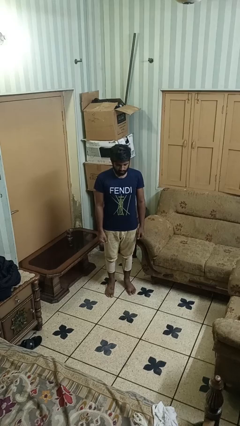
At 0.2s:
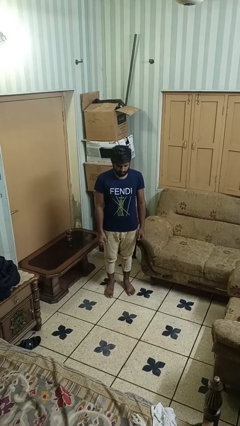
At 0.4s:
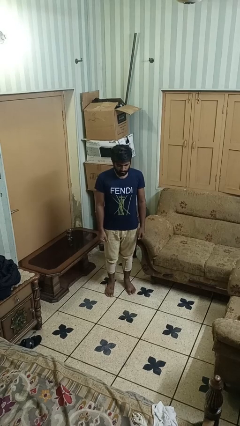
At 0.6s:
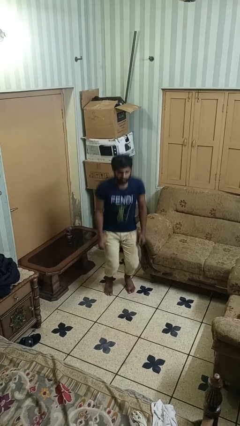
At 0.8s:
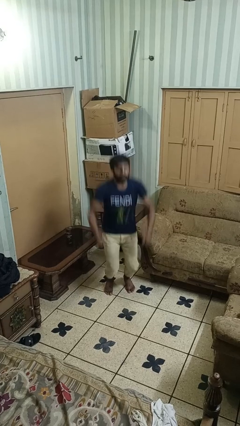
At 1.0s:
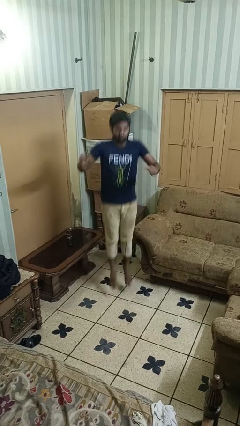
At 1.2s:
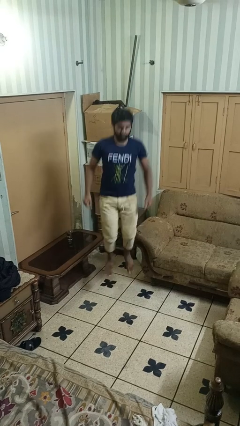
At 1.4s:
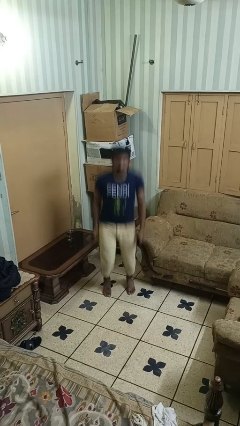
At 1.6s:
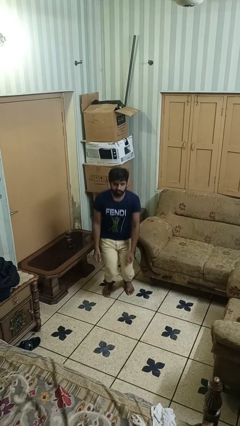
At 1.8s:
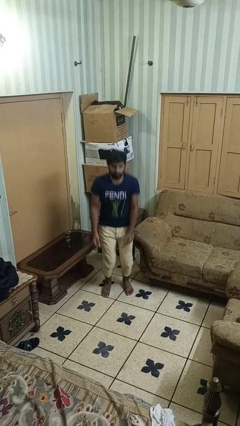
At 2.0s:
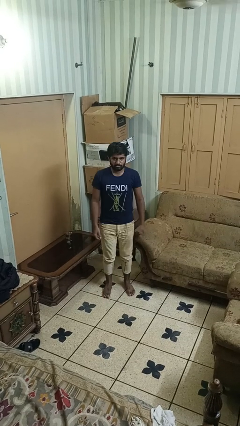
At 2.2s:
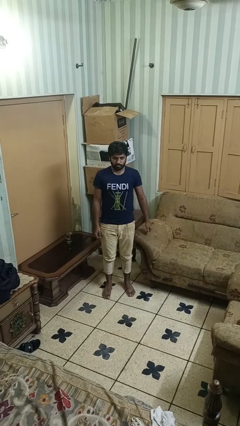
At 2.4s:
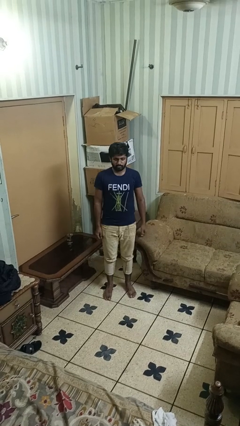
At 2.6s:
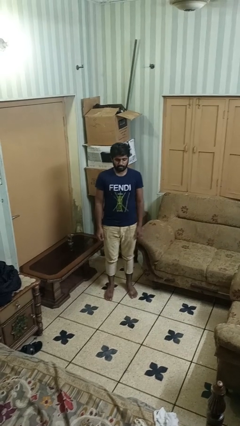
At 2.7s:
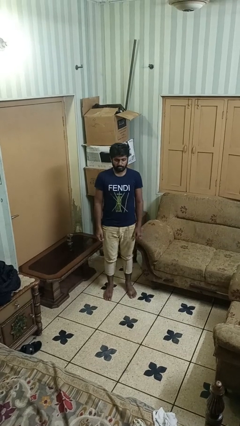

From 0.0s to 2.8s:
person jumps

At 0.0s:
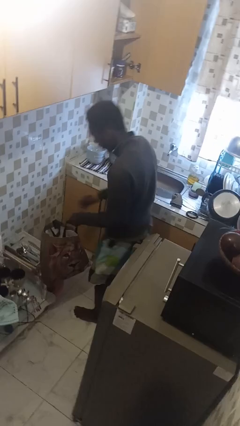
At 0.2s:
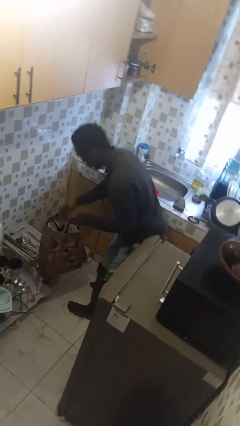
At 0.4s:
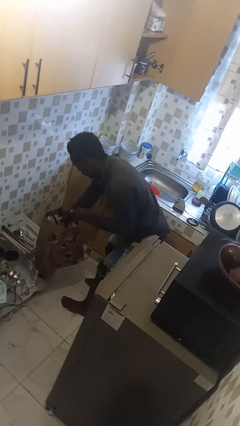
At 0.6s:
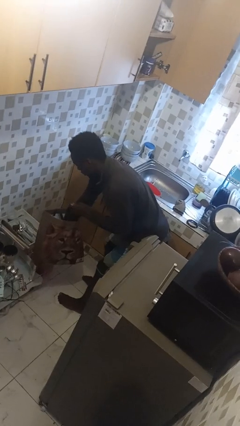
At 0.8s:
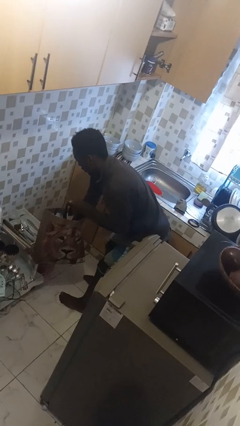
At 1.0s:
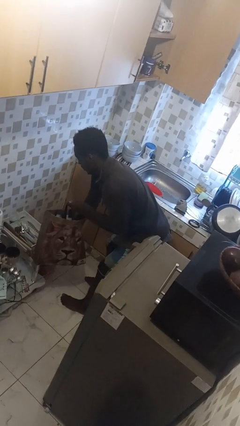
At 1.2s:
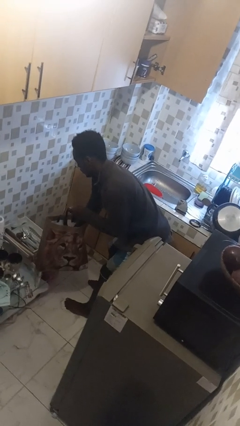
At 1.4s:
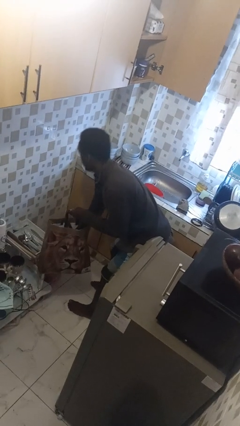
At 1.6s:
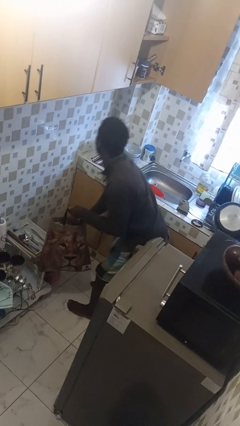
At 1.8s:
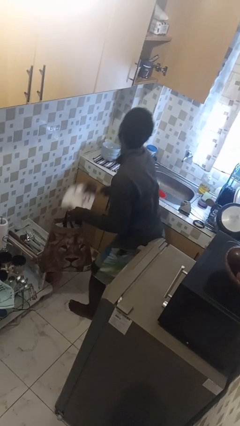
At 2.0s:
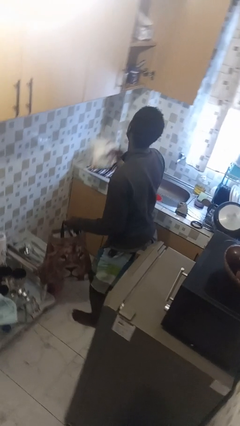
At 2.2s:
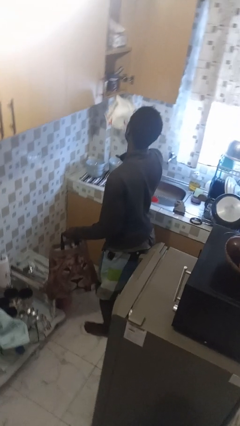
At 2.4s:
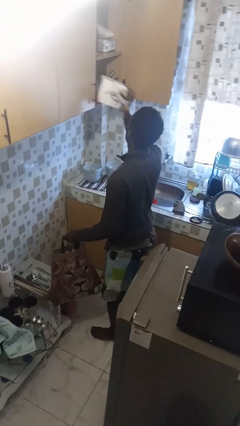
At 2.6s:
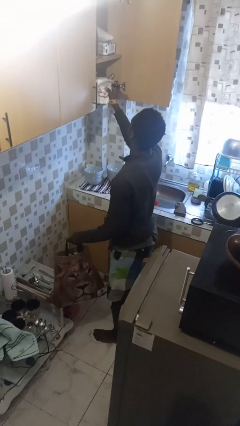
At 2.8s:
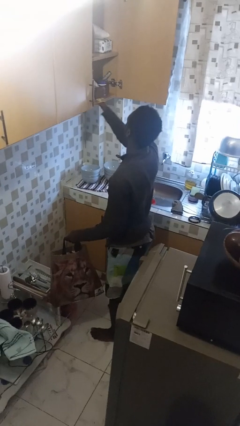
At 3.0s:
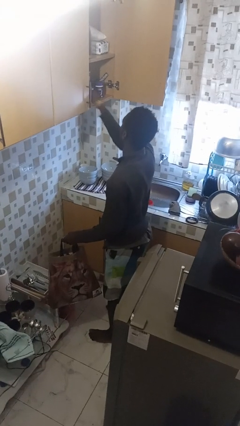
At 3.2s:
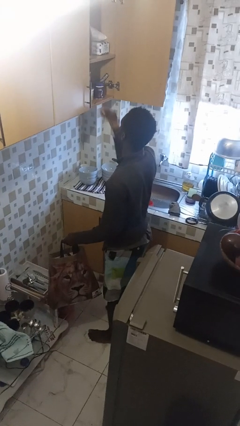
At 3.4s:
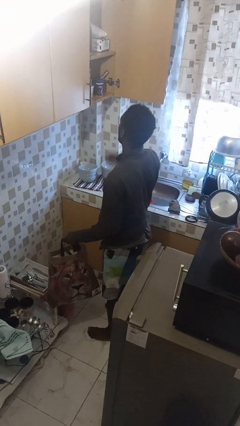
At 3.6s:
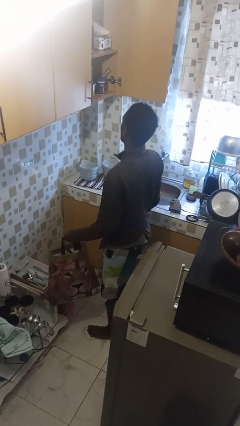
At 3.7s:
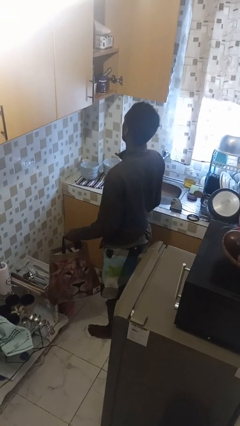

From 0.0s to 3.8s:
person loads groceries into cabinet

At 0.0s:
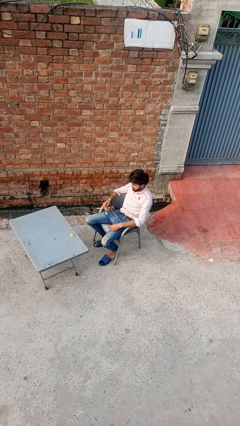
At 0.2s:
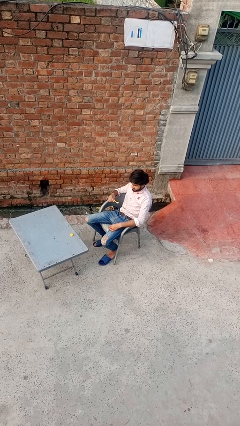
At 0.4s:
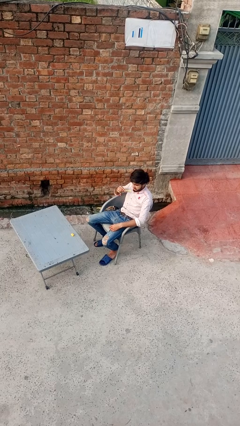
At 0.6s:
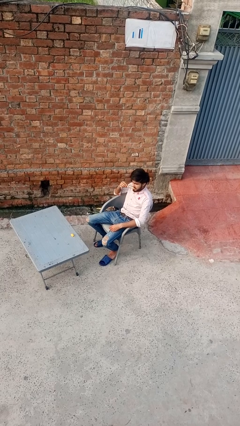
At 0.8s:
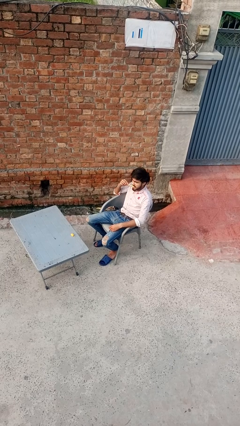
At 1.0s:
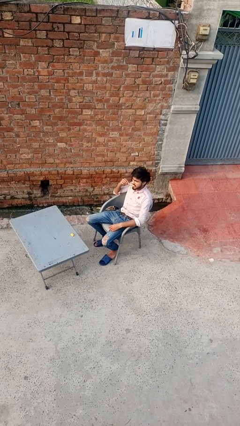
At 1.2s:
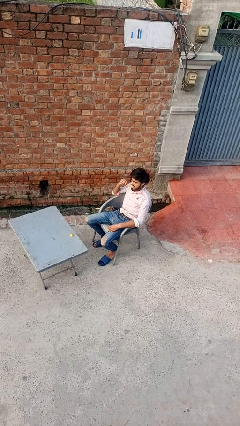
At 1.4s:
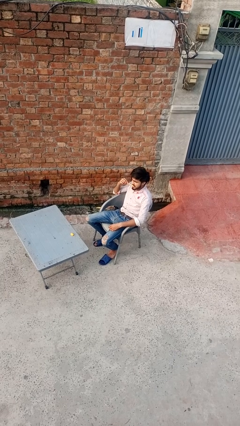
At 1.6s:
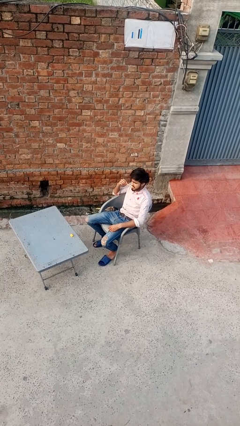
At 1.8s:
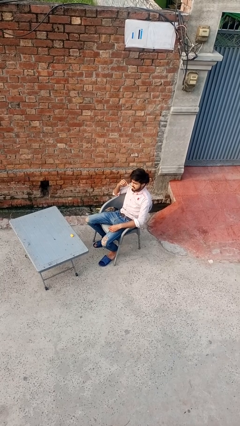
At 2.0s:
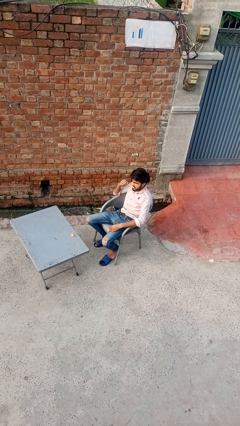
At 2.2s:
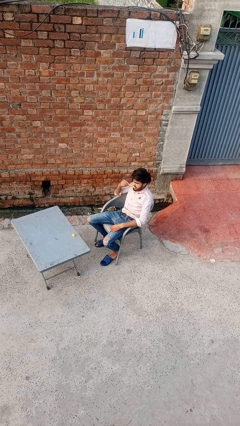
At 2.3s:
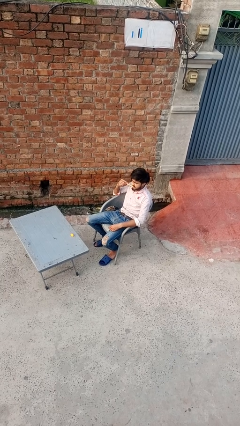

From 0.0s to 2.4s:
person brushes teeth

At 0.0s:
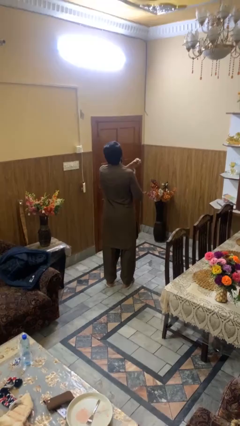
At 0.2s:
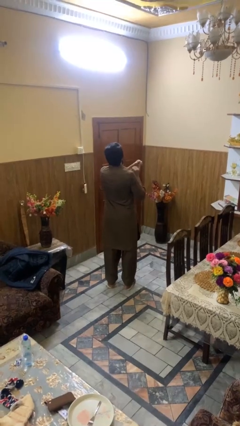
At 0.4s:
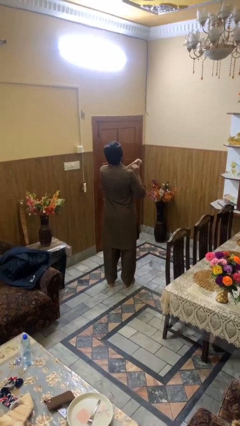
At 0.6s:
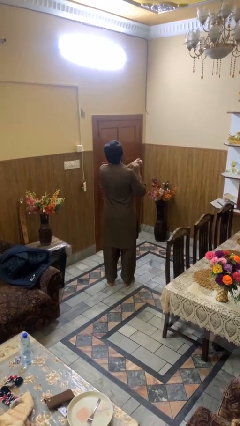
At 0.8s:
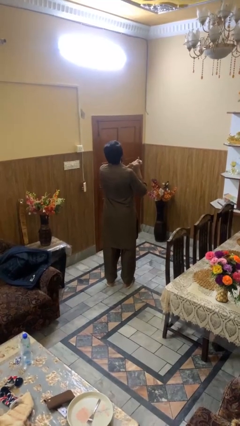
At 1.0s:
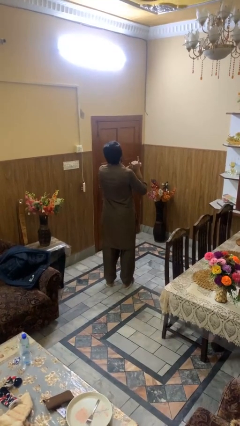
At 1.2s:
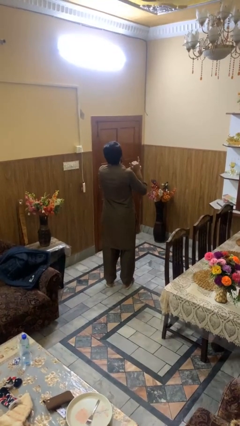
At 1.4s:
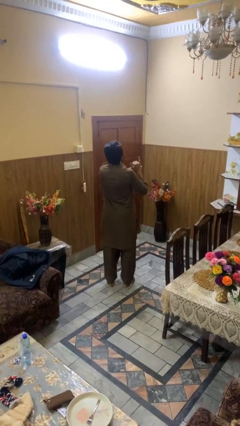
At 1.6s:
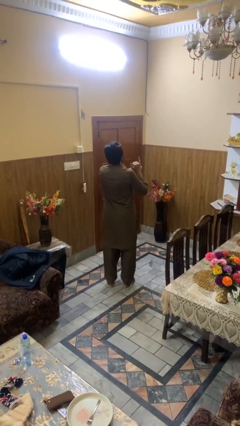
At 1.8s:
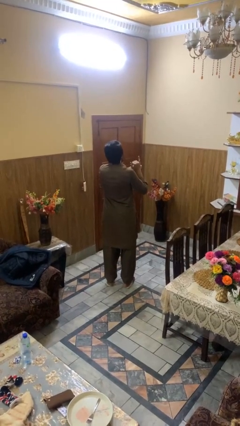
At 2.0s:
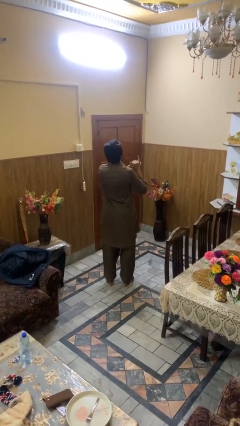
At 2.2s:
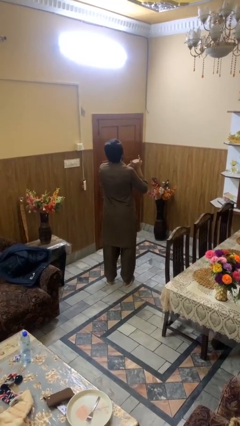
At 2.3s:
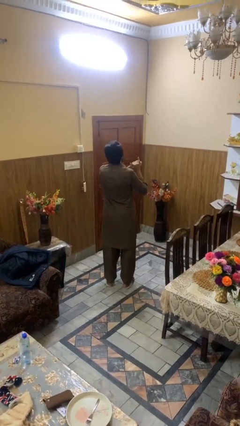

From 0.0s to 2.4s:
person puts on ring

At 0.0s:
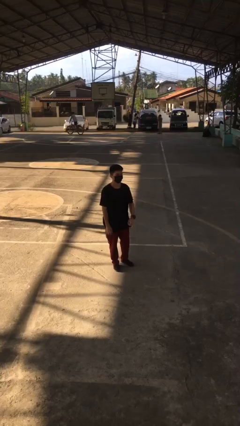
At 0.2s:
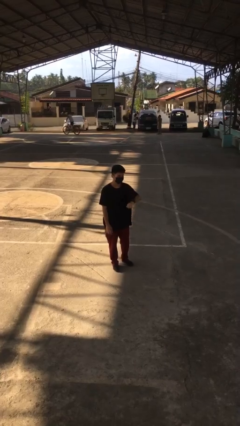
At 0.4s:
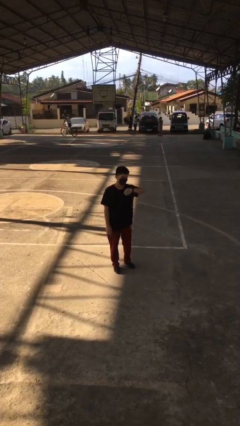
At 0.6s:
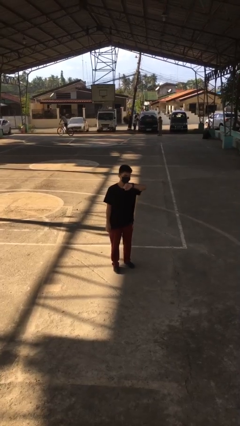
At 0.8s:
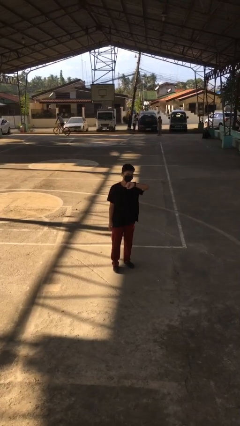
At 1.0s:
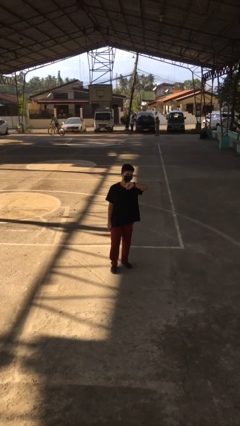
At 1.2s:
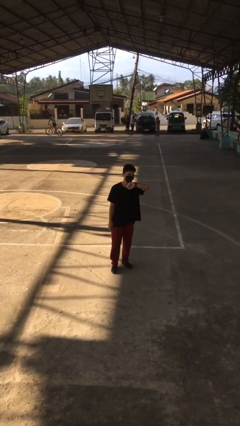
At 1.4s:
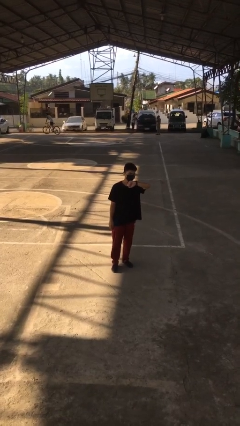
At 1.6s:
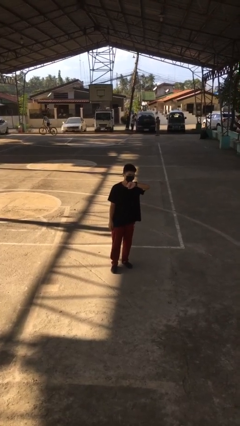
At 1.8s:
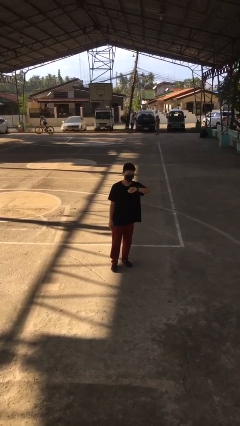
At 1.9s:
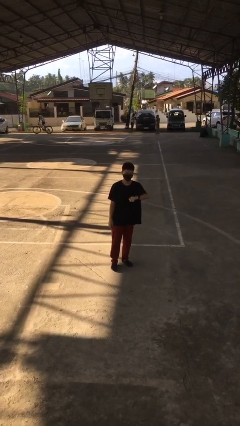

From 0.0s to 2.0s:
person looks at wristwatch

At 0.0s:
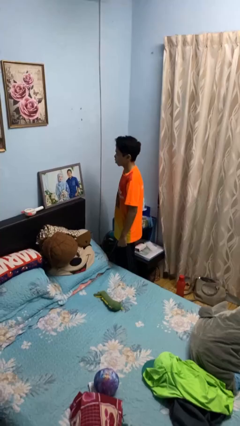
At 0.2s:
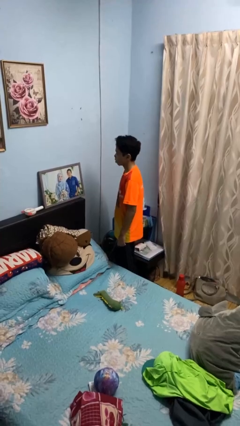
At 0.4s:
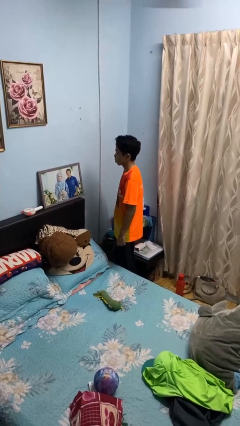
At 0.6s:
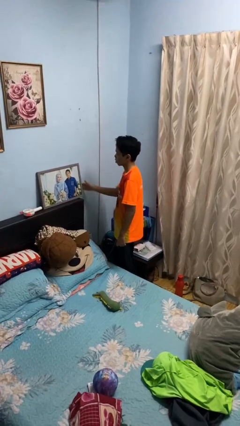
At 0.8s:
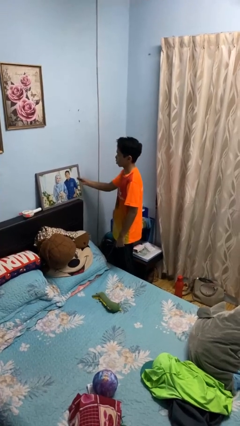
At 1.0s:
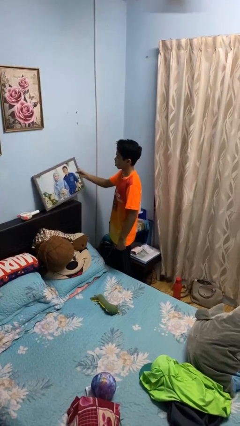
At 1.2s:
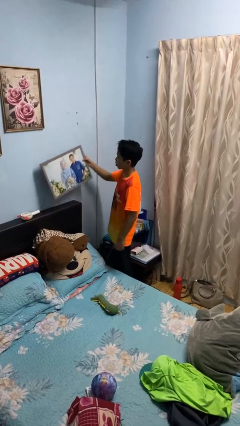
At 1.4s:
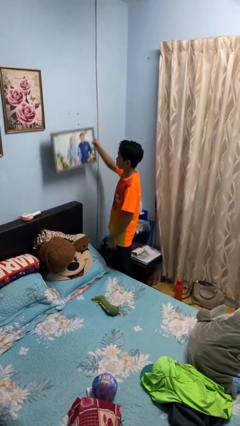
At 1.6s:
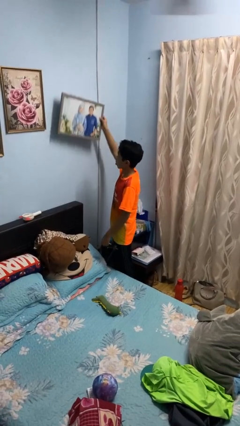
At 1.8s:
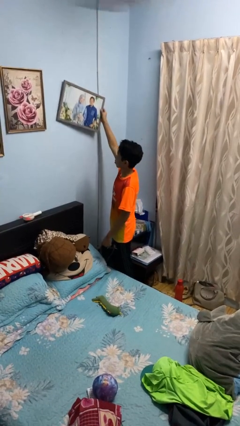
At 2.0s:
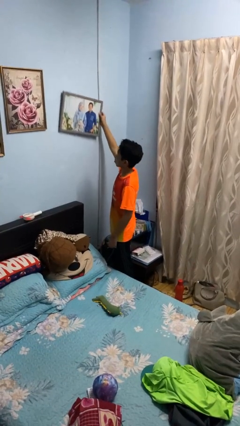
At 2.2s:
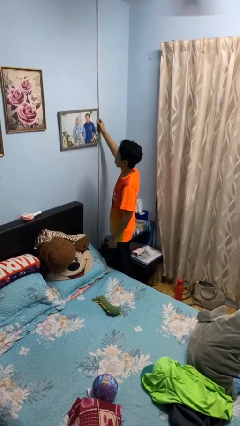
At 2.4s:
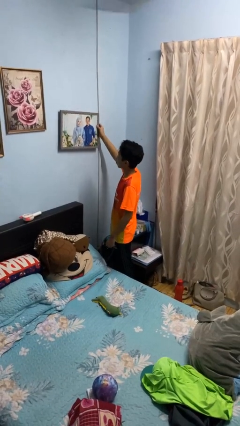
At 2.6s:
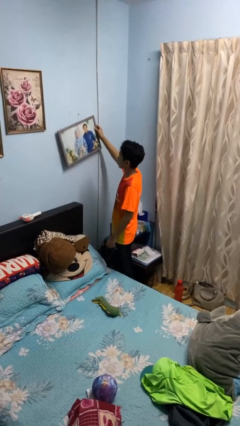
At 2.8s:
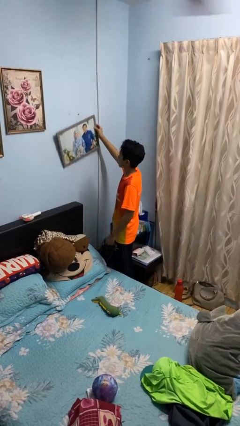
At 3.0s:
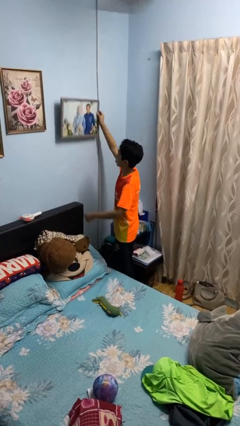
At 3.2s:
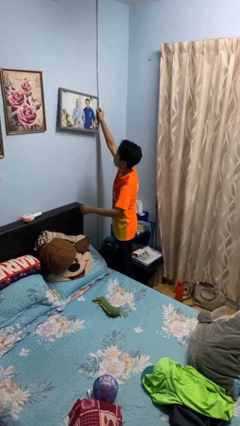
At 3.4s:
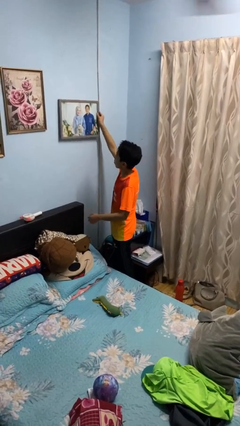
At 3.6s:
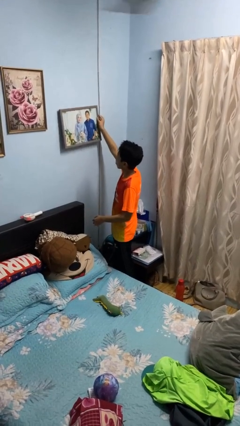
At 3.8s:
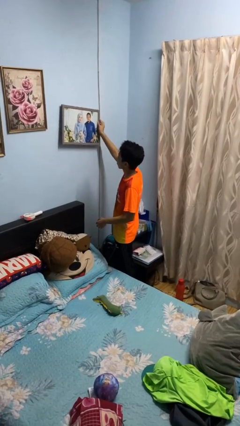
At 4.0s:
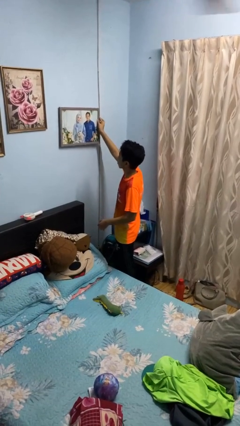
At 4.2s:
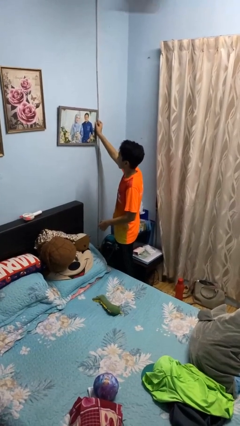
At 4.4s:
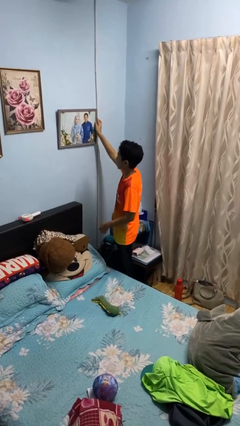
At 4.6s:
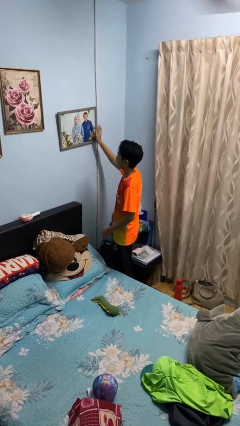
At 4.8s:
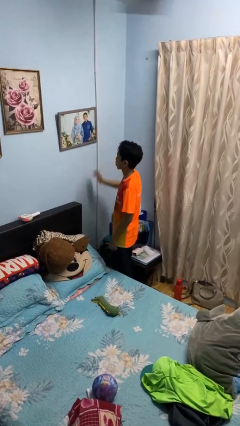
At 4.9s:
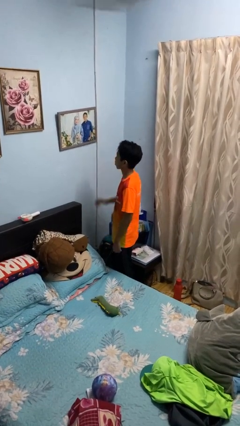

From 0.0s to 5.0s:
person puts up picture frame
